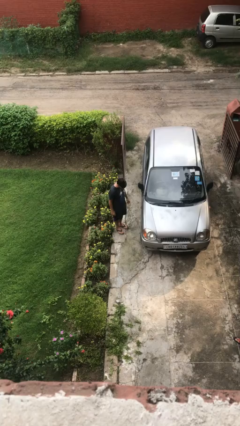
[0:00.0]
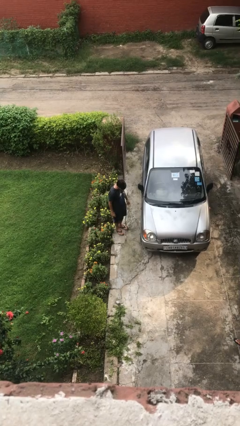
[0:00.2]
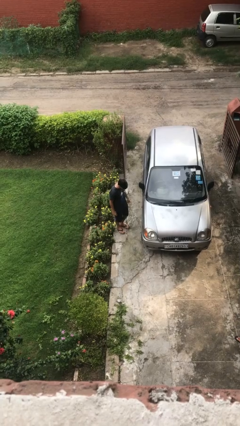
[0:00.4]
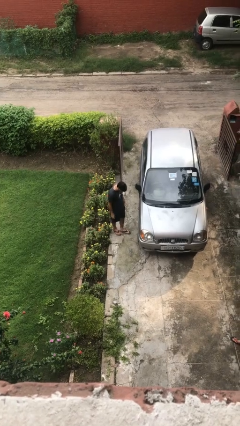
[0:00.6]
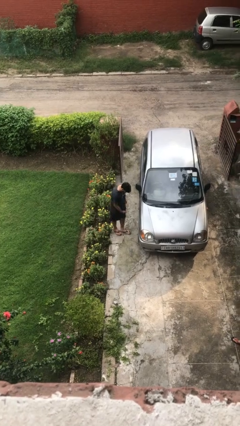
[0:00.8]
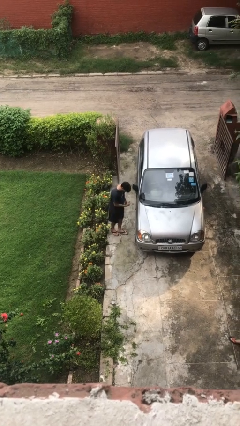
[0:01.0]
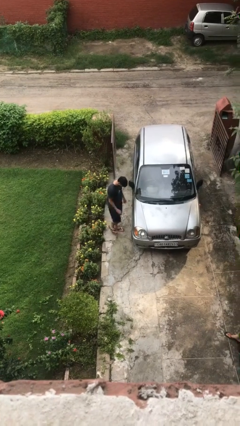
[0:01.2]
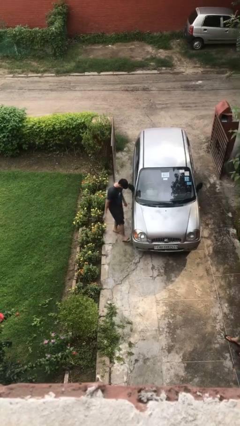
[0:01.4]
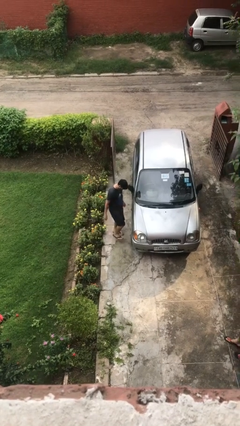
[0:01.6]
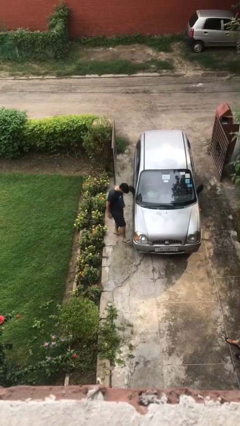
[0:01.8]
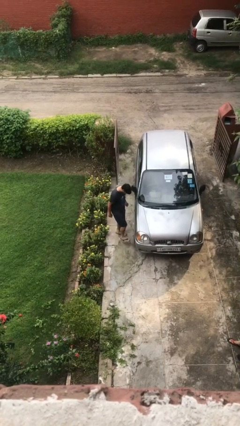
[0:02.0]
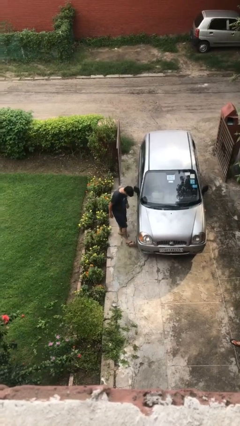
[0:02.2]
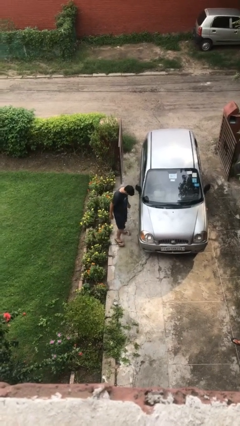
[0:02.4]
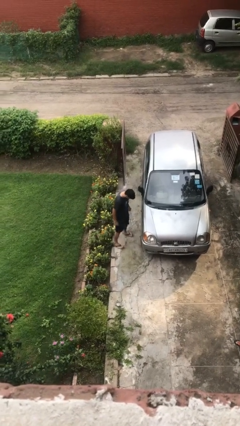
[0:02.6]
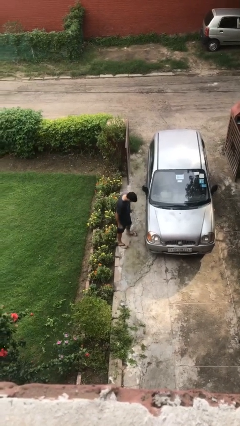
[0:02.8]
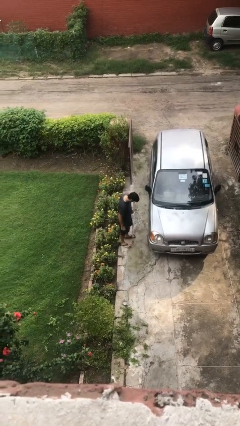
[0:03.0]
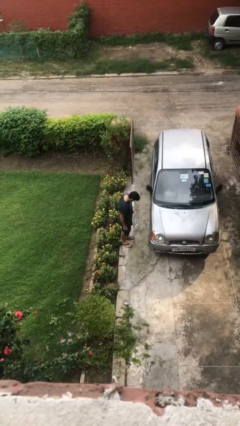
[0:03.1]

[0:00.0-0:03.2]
person kicks car tires

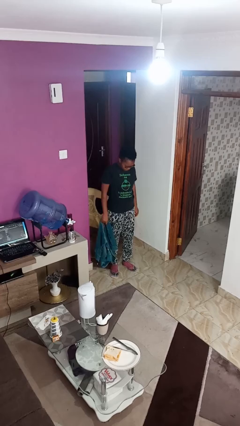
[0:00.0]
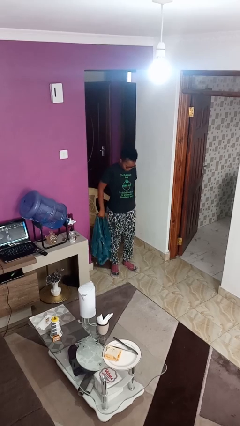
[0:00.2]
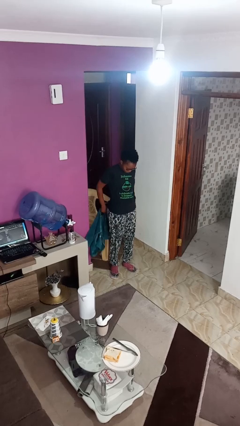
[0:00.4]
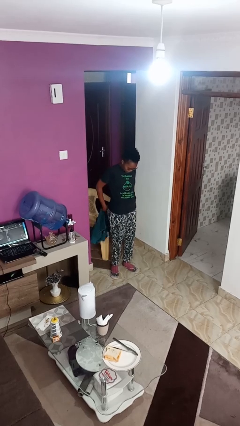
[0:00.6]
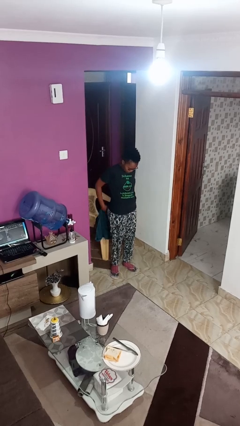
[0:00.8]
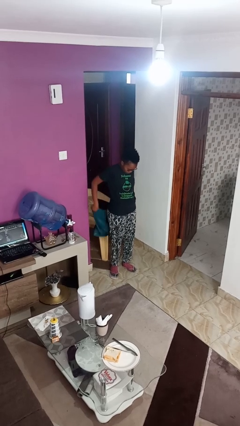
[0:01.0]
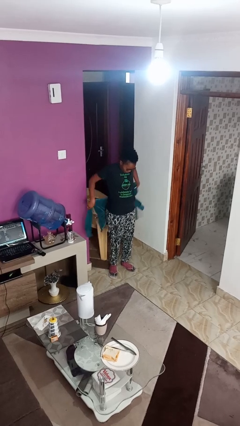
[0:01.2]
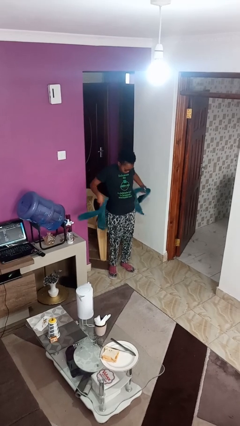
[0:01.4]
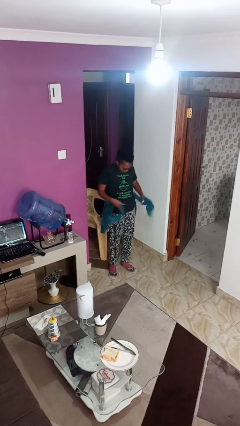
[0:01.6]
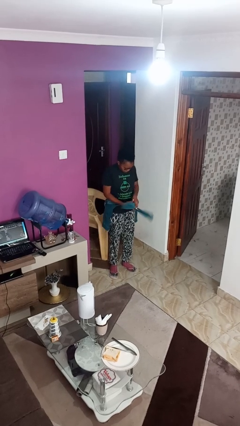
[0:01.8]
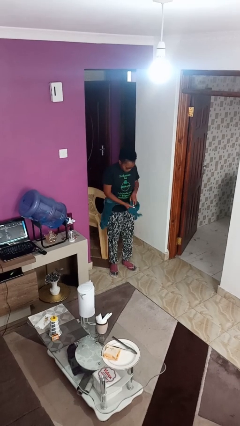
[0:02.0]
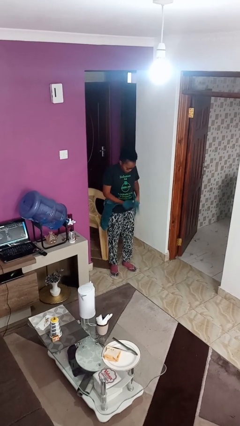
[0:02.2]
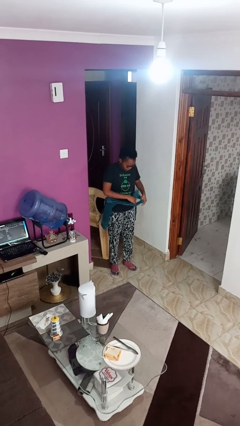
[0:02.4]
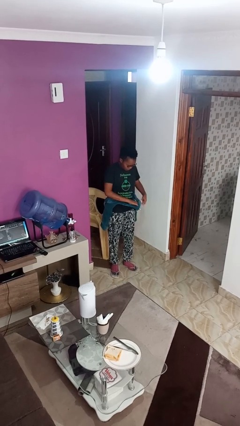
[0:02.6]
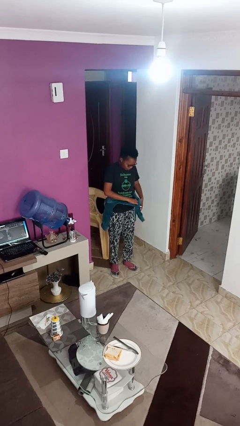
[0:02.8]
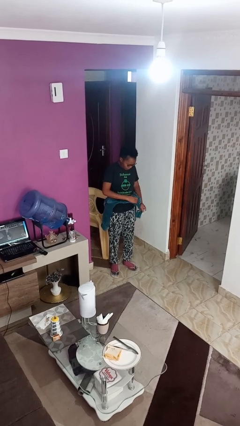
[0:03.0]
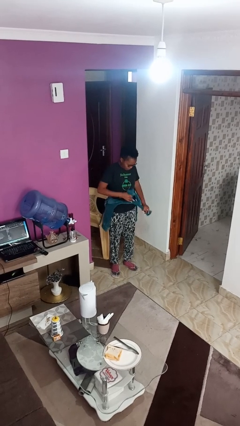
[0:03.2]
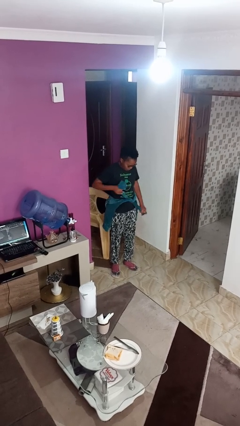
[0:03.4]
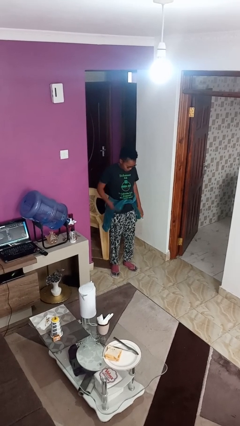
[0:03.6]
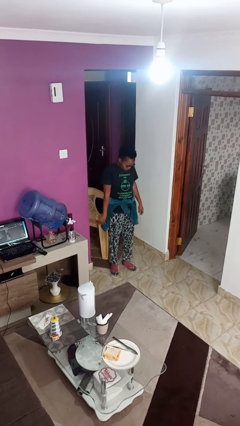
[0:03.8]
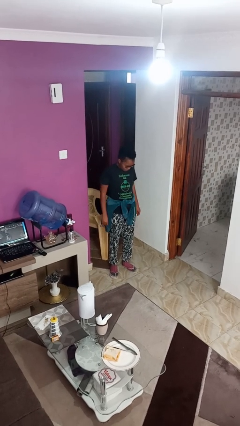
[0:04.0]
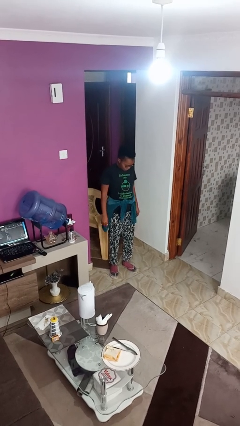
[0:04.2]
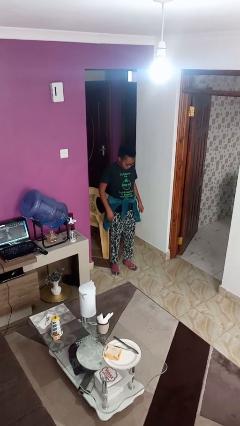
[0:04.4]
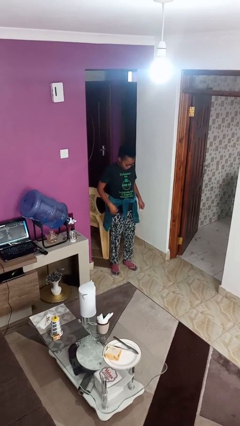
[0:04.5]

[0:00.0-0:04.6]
person ties jacket around waist

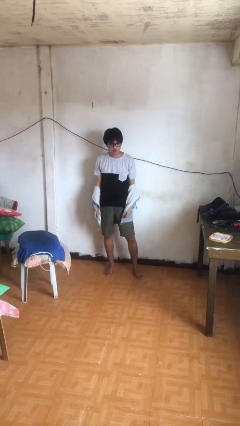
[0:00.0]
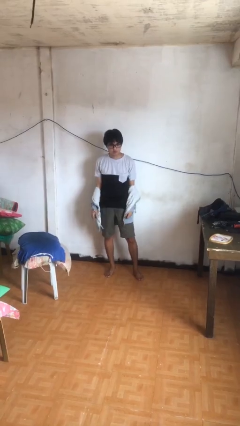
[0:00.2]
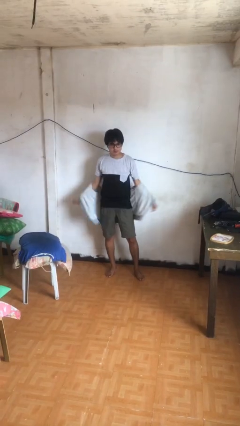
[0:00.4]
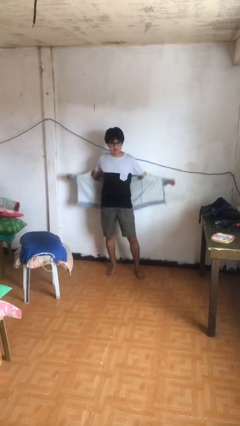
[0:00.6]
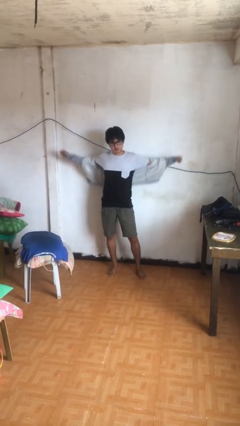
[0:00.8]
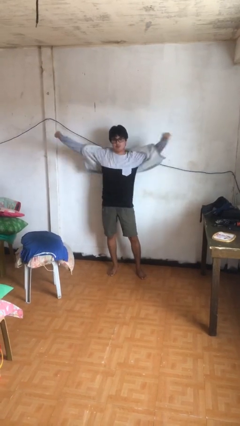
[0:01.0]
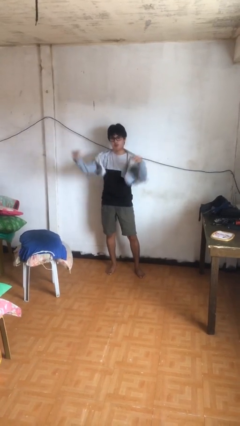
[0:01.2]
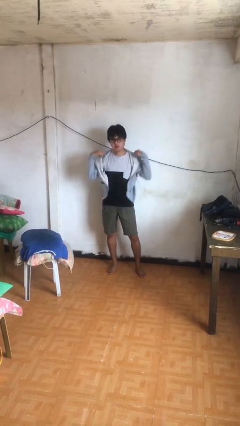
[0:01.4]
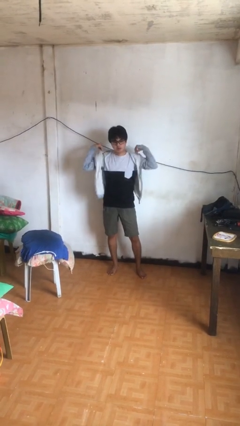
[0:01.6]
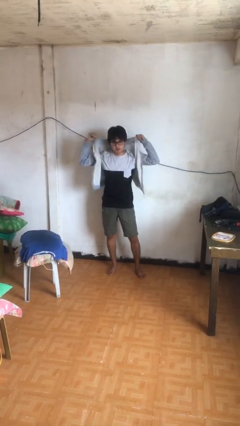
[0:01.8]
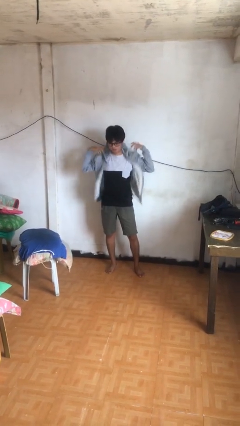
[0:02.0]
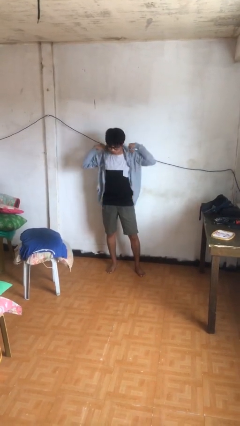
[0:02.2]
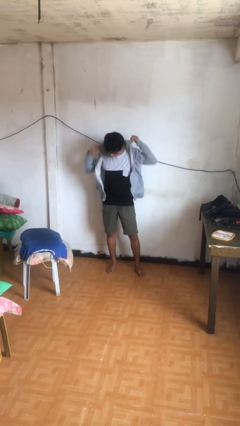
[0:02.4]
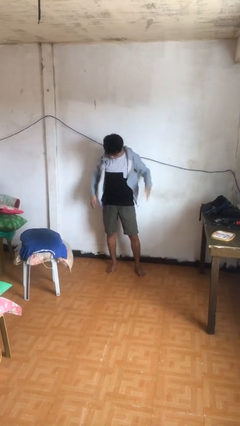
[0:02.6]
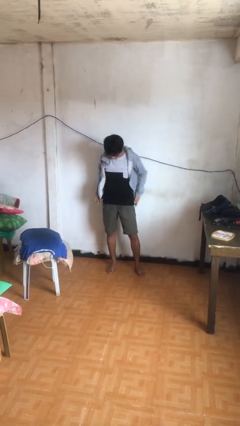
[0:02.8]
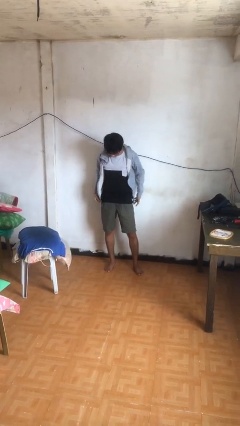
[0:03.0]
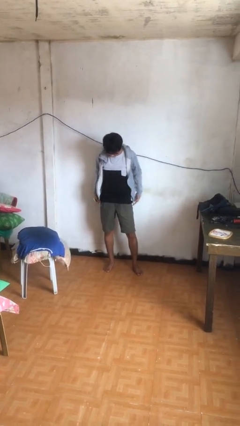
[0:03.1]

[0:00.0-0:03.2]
person puts on jacket

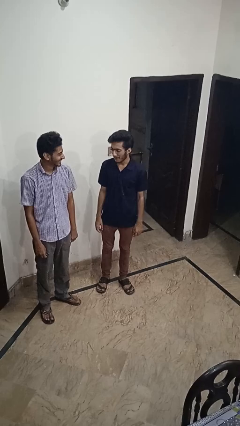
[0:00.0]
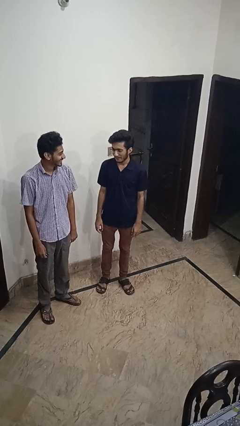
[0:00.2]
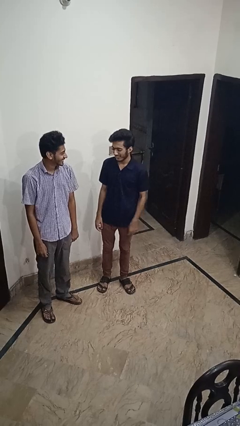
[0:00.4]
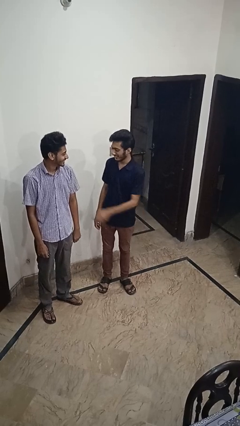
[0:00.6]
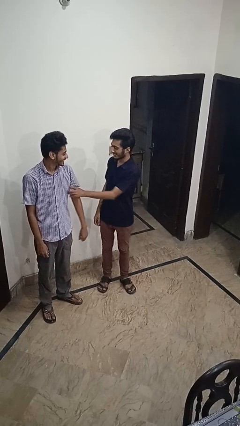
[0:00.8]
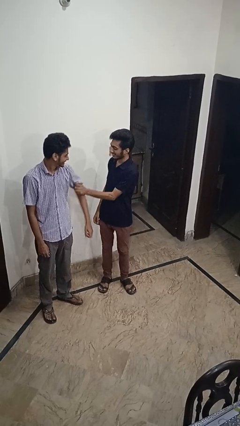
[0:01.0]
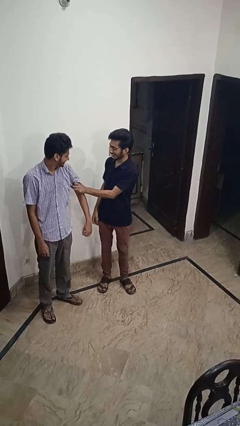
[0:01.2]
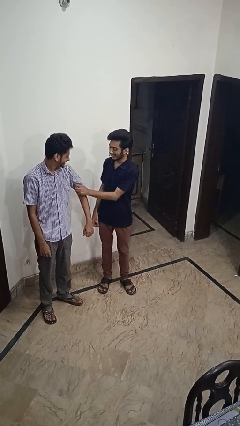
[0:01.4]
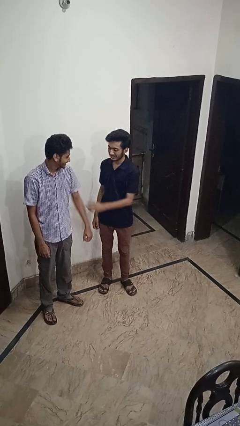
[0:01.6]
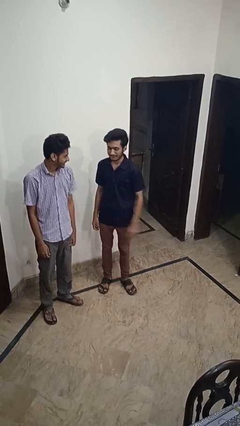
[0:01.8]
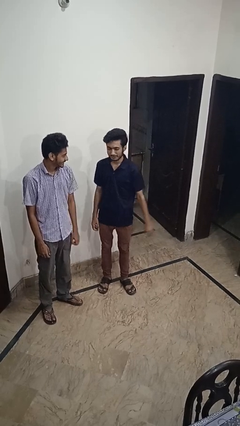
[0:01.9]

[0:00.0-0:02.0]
person grabs person by bicep

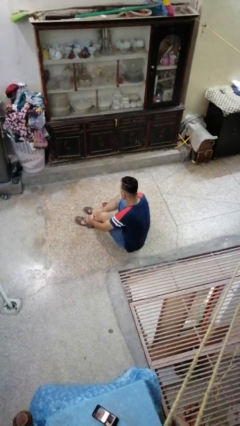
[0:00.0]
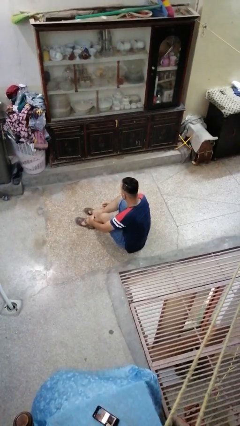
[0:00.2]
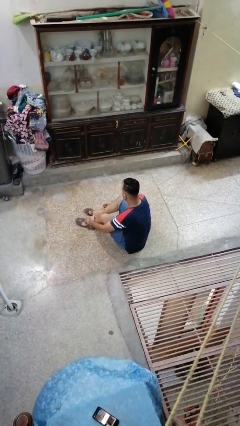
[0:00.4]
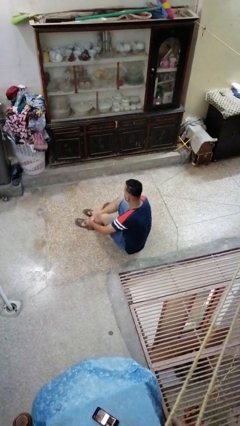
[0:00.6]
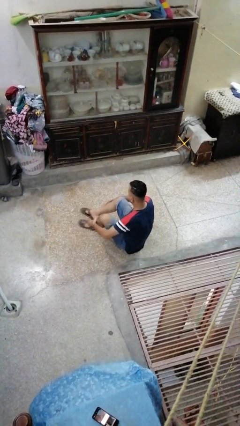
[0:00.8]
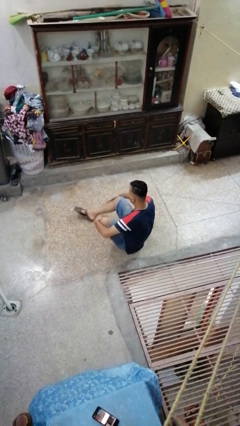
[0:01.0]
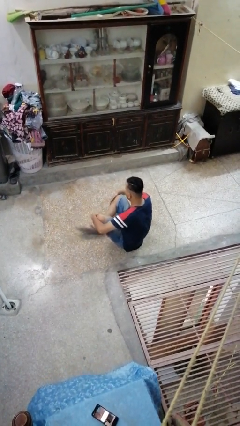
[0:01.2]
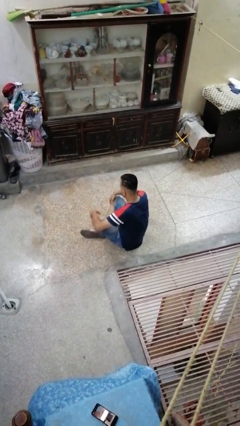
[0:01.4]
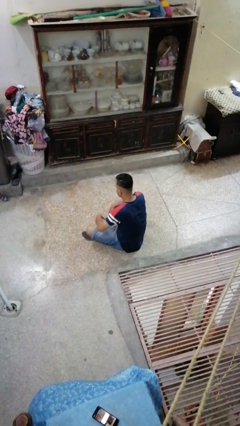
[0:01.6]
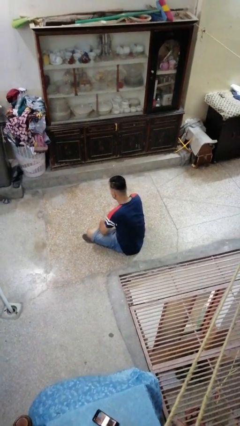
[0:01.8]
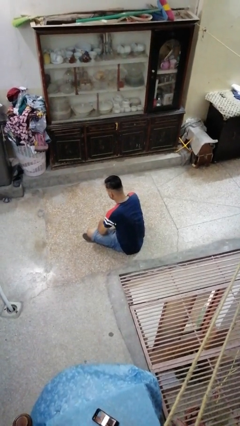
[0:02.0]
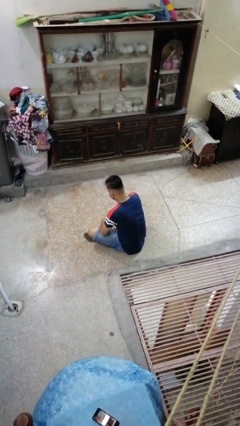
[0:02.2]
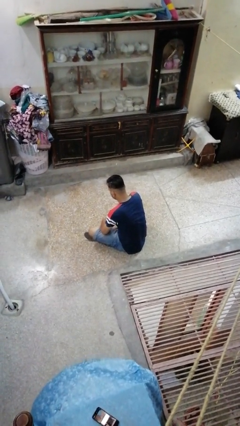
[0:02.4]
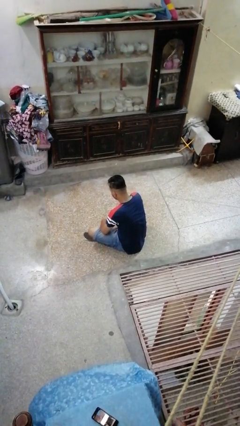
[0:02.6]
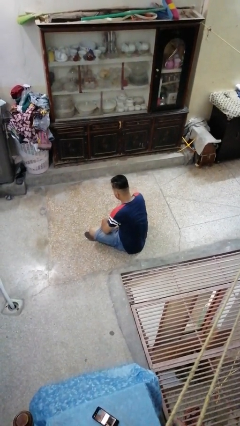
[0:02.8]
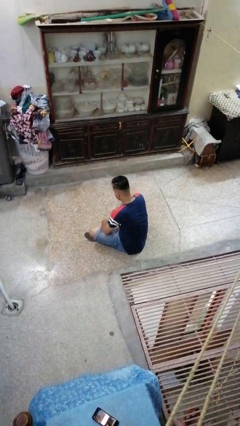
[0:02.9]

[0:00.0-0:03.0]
person crosses legs

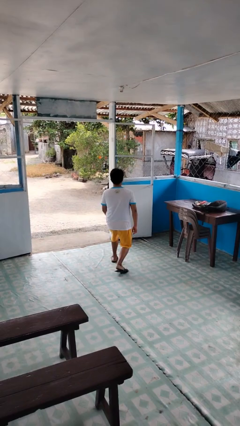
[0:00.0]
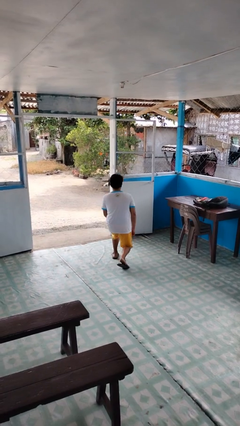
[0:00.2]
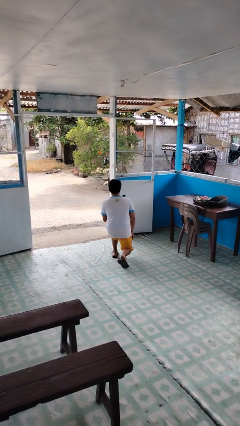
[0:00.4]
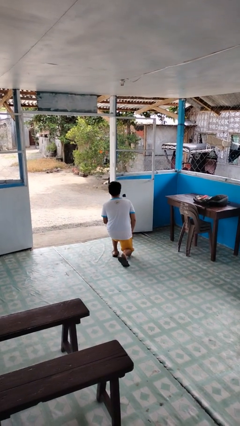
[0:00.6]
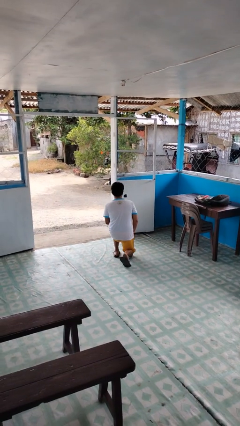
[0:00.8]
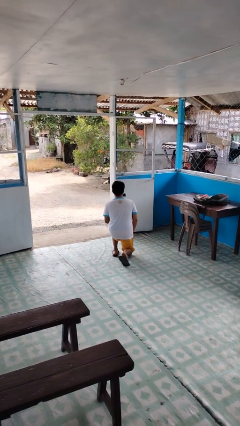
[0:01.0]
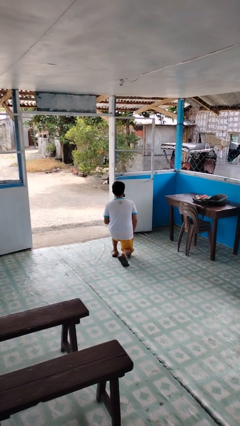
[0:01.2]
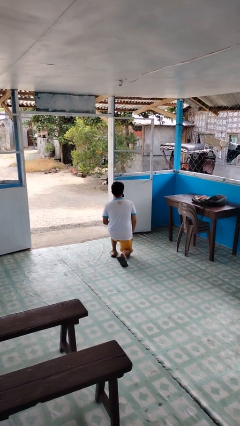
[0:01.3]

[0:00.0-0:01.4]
person kneels
